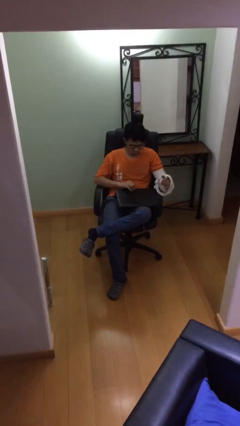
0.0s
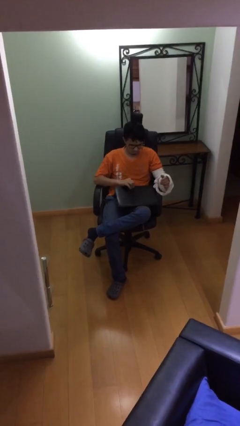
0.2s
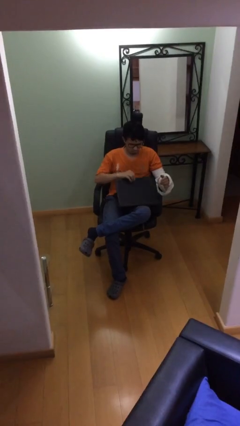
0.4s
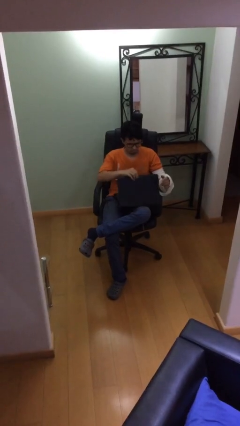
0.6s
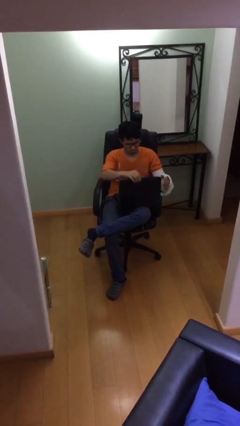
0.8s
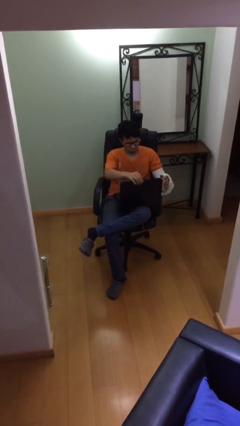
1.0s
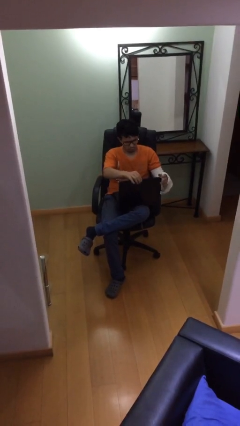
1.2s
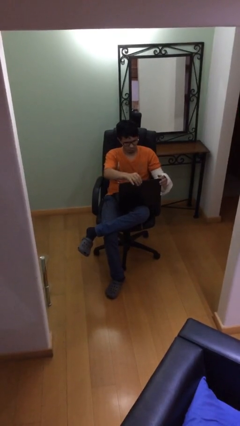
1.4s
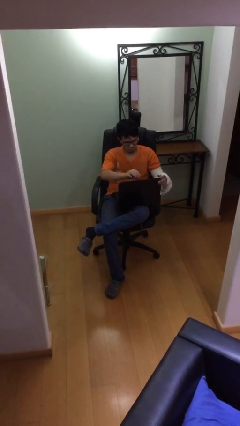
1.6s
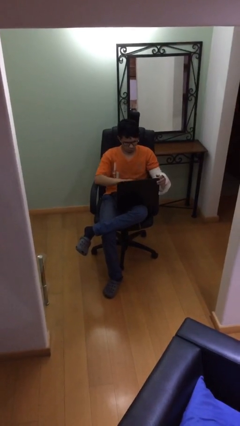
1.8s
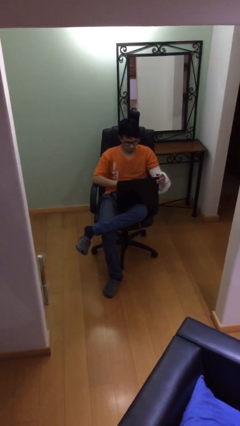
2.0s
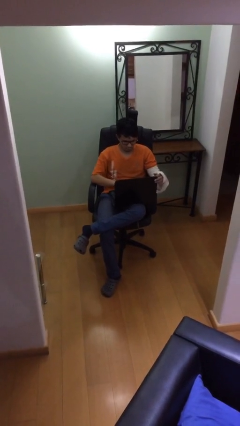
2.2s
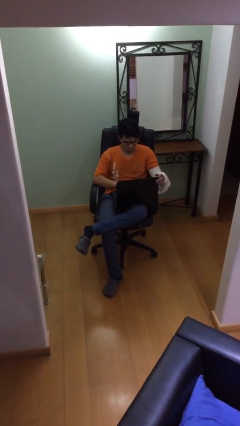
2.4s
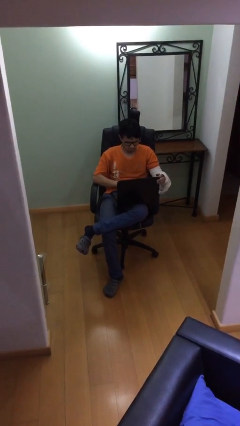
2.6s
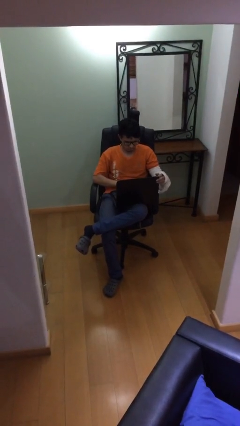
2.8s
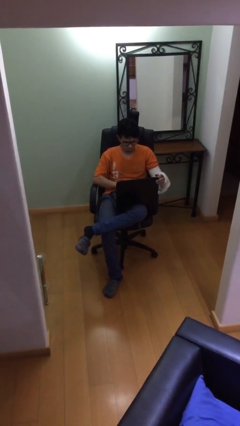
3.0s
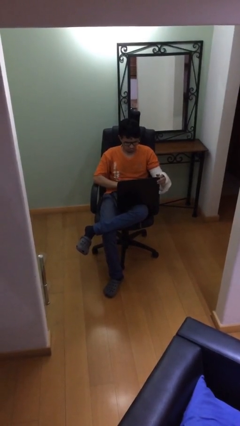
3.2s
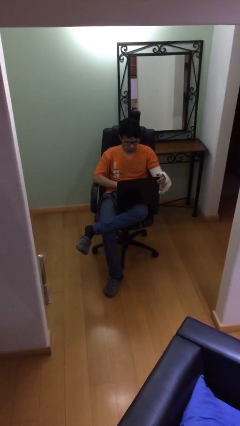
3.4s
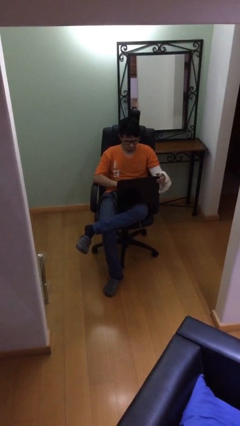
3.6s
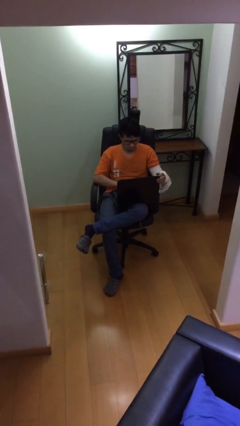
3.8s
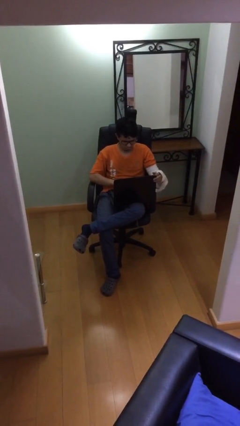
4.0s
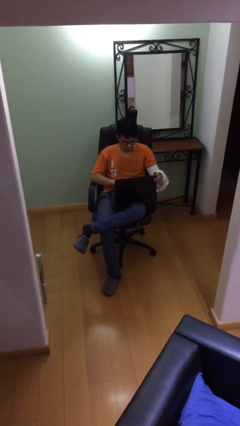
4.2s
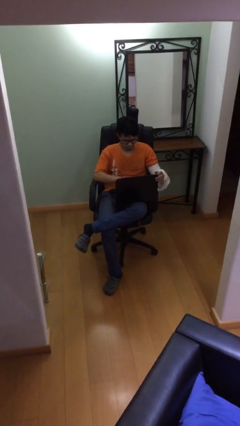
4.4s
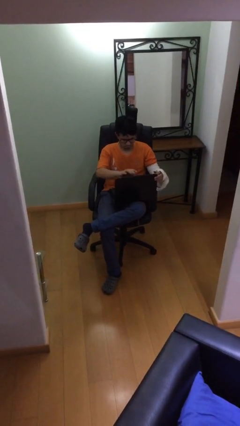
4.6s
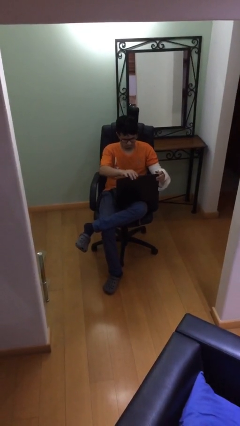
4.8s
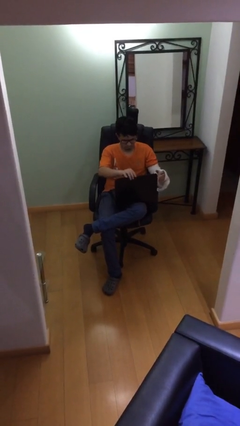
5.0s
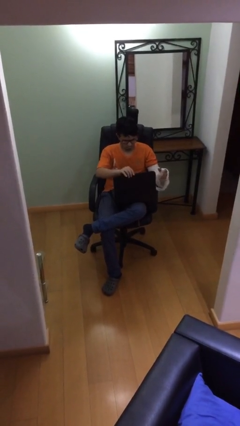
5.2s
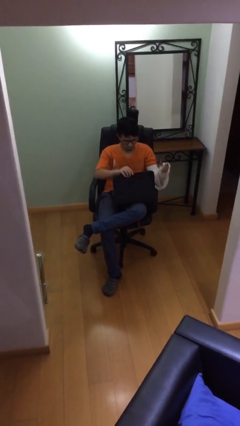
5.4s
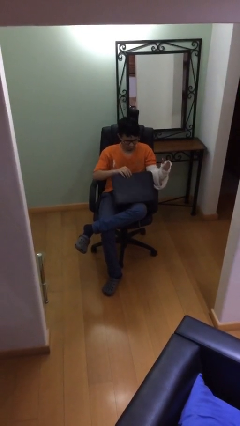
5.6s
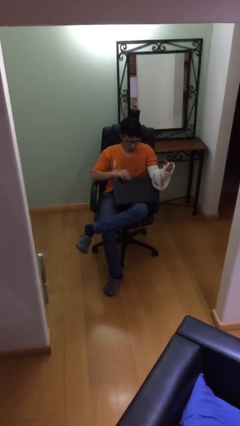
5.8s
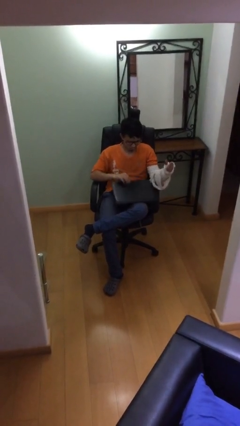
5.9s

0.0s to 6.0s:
person interacts with laptop

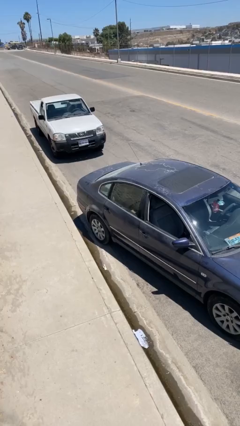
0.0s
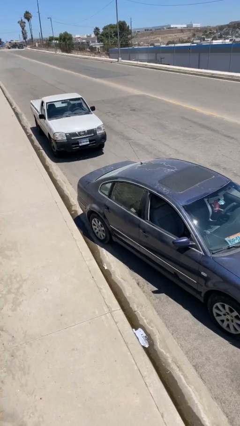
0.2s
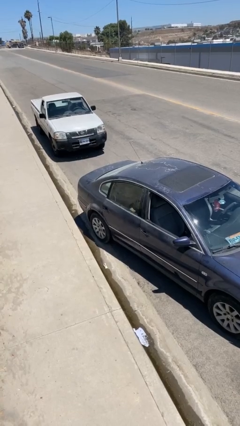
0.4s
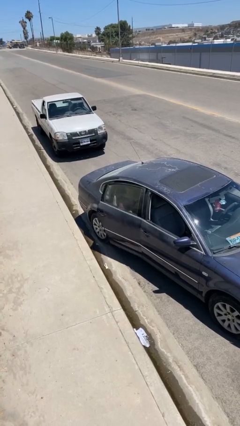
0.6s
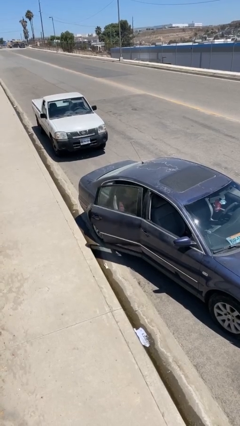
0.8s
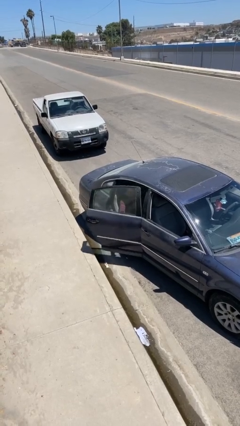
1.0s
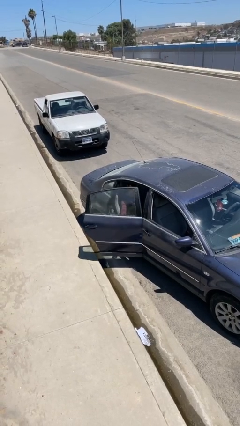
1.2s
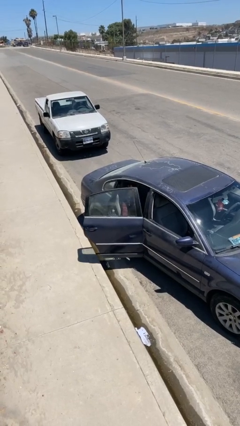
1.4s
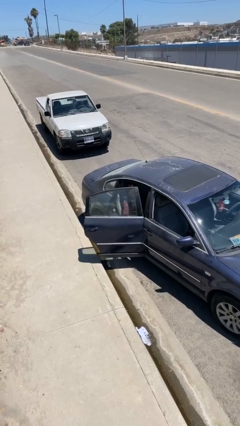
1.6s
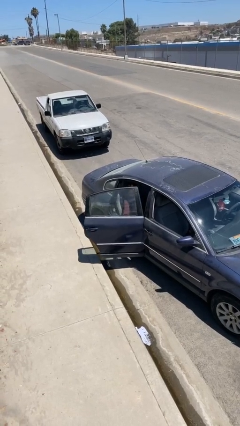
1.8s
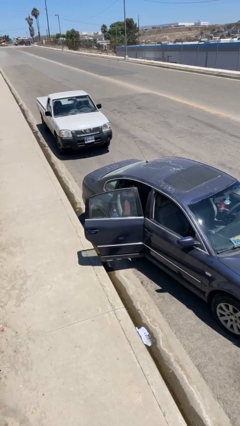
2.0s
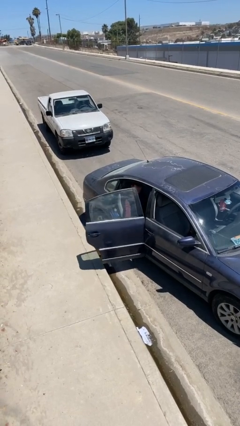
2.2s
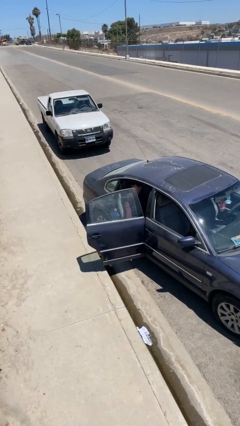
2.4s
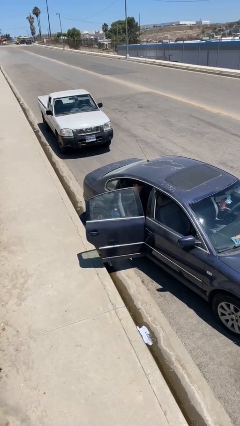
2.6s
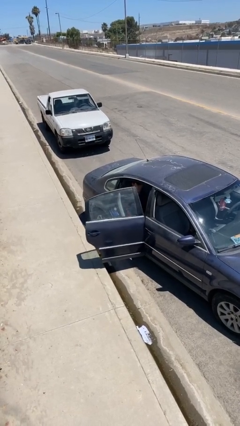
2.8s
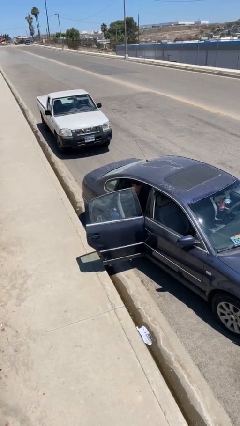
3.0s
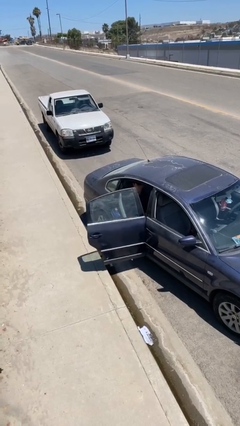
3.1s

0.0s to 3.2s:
person opens car door

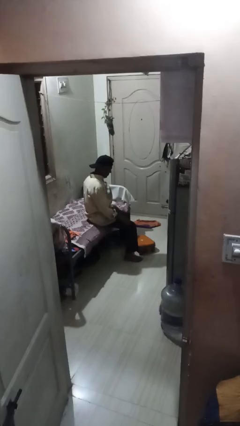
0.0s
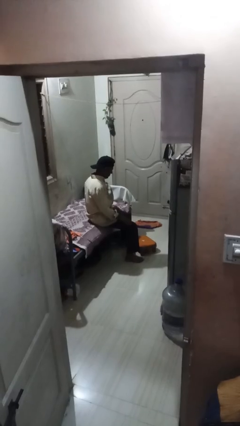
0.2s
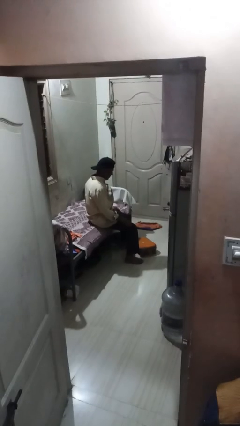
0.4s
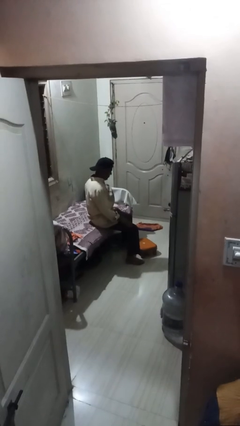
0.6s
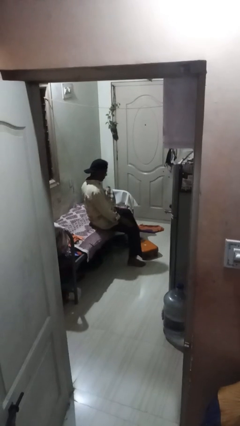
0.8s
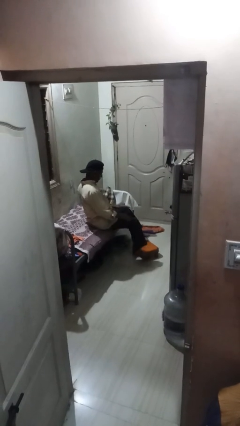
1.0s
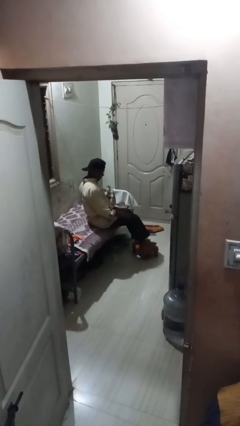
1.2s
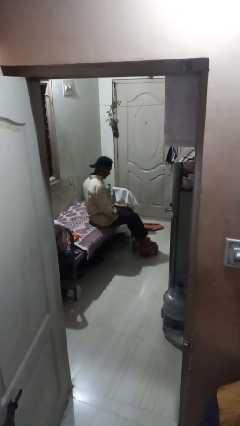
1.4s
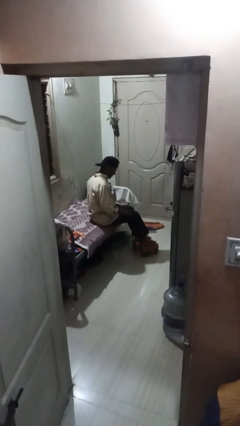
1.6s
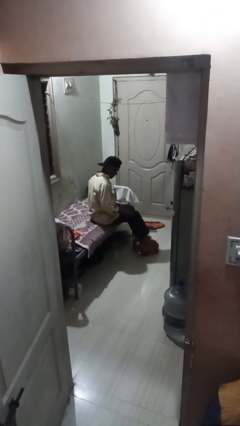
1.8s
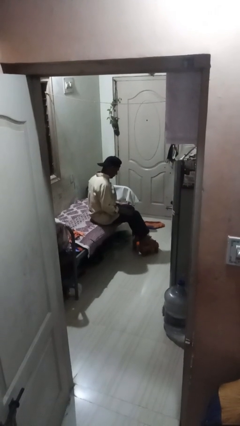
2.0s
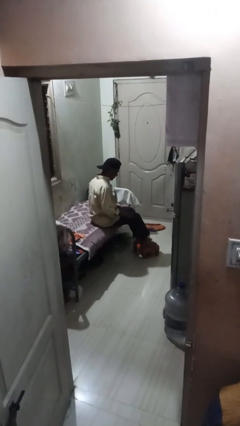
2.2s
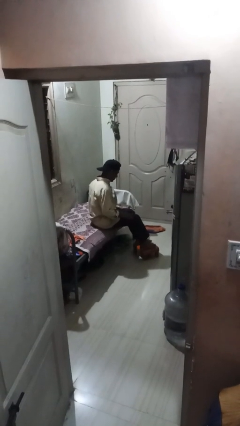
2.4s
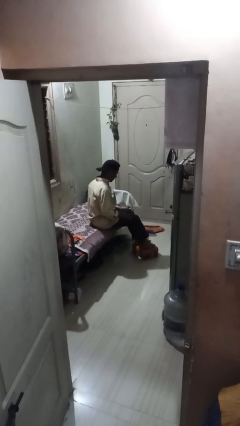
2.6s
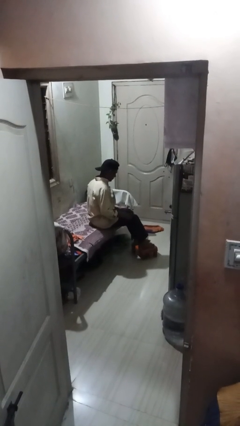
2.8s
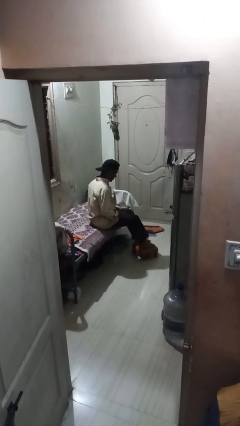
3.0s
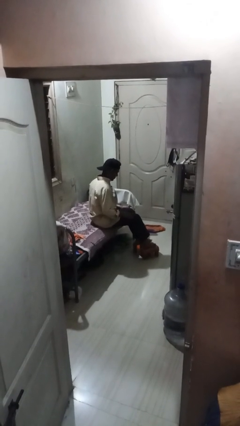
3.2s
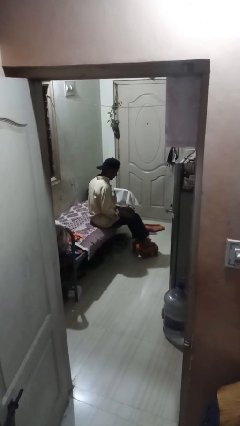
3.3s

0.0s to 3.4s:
person puts feet up

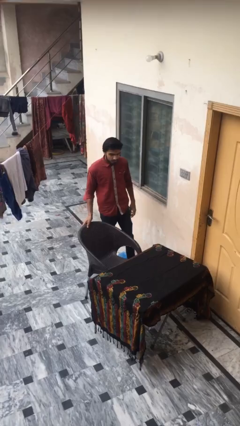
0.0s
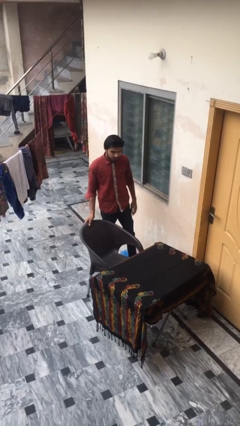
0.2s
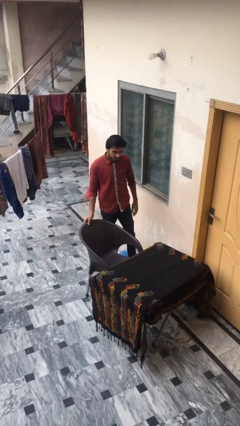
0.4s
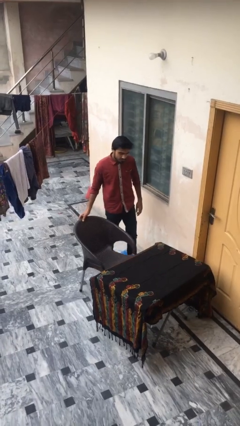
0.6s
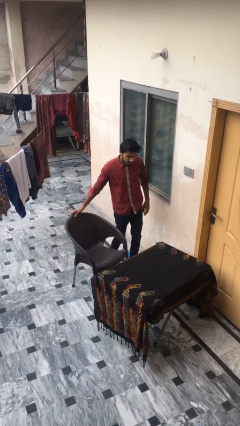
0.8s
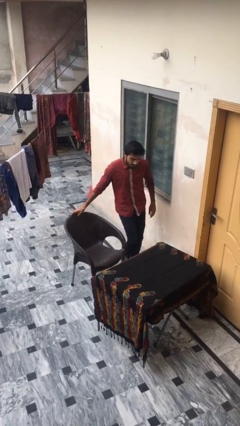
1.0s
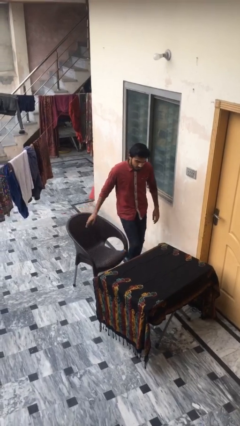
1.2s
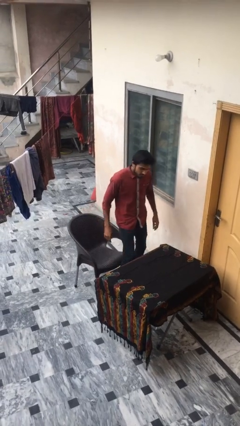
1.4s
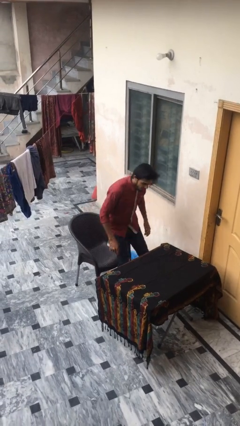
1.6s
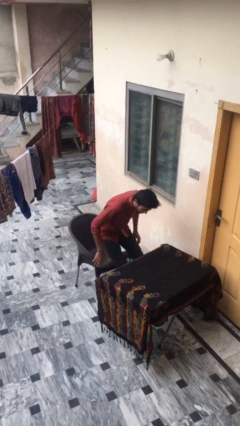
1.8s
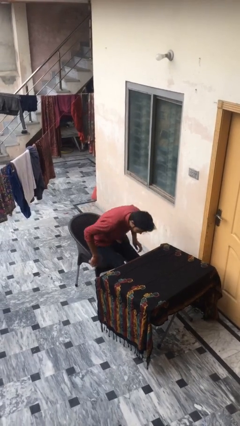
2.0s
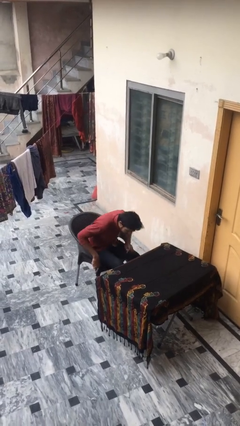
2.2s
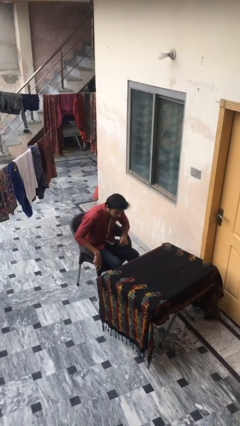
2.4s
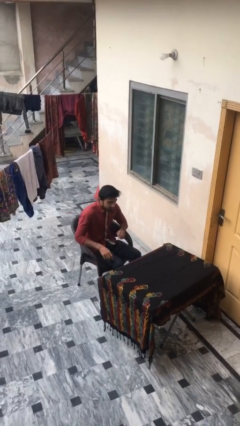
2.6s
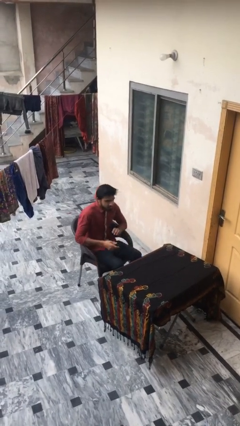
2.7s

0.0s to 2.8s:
person sits down

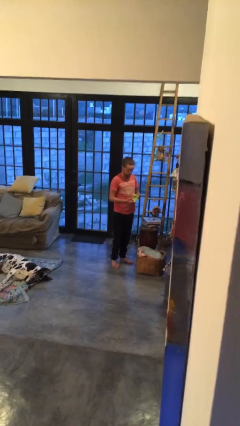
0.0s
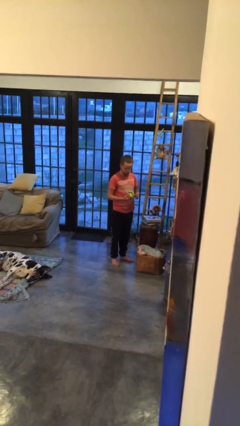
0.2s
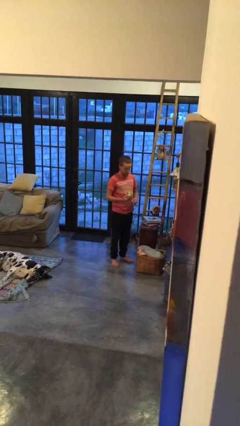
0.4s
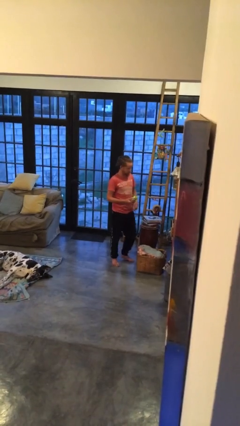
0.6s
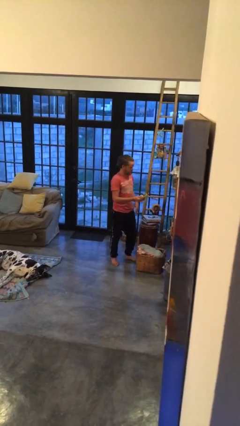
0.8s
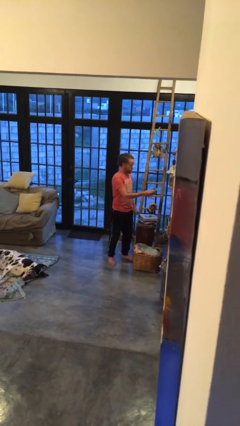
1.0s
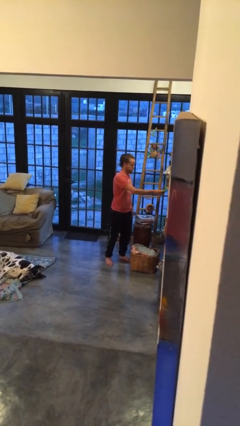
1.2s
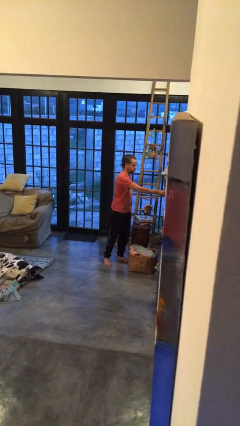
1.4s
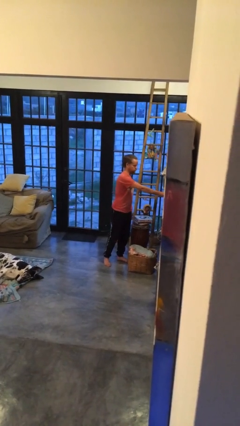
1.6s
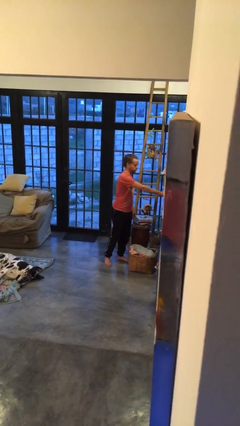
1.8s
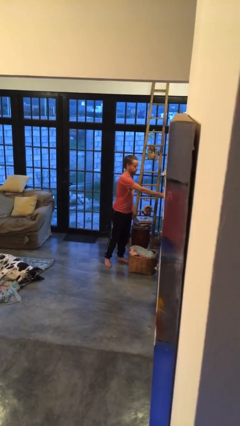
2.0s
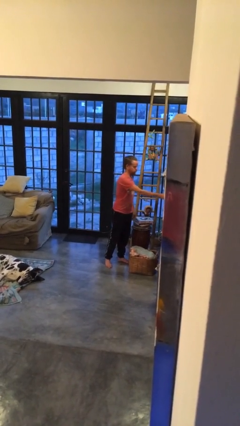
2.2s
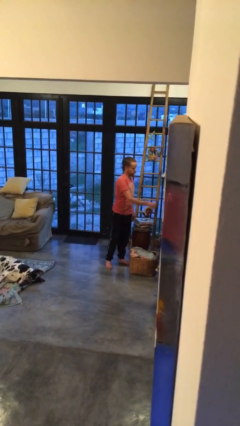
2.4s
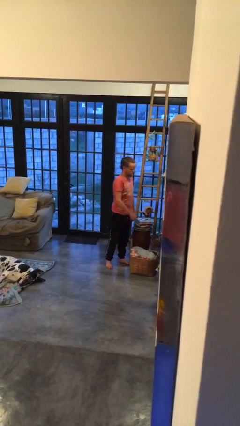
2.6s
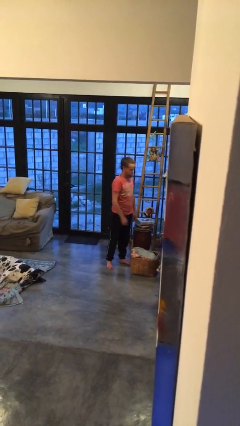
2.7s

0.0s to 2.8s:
person puts down object on countertop
